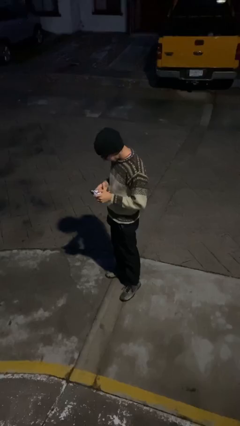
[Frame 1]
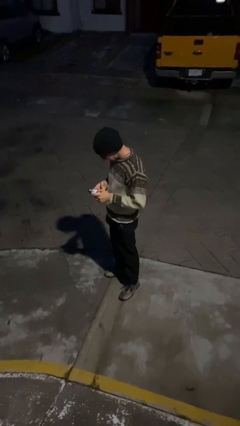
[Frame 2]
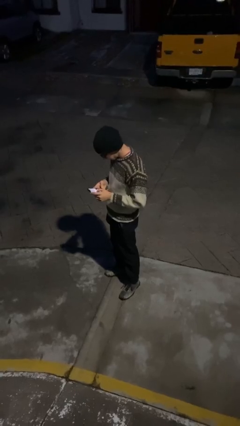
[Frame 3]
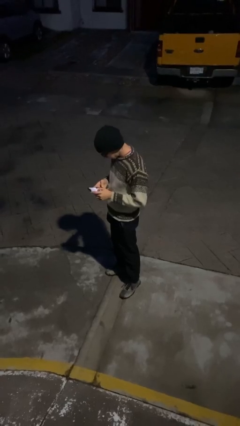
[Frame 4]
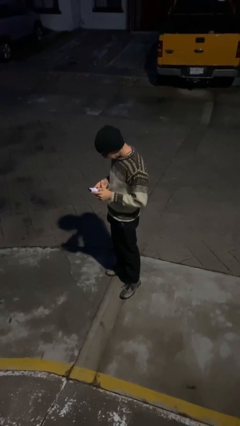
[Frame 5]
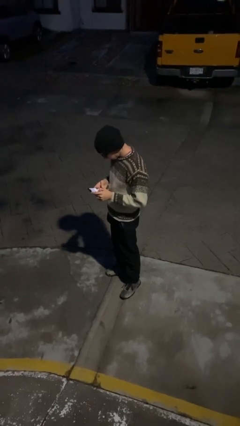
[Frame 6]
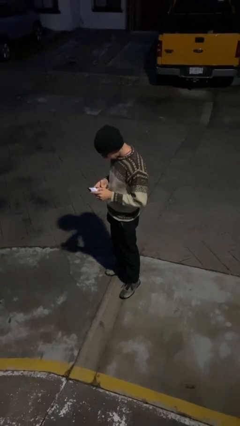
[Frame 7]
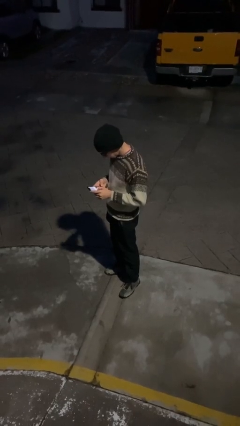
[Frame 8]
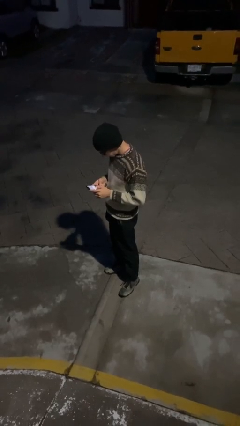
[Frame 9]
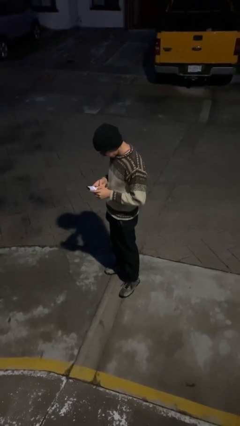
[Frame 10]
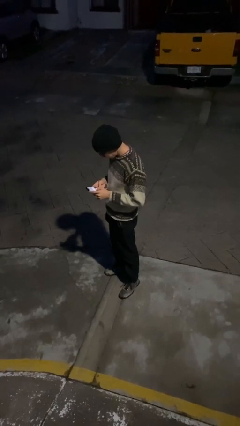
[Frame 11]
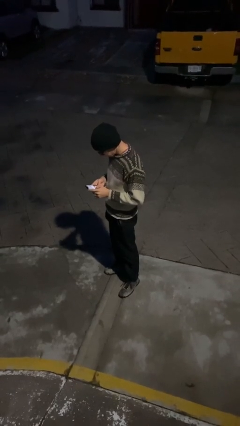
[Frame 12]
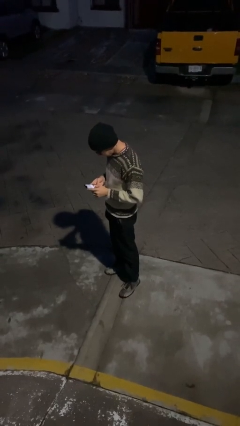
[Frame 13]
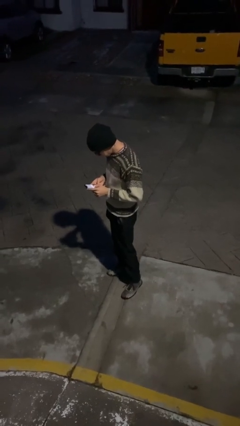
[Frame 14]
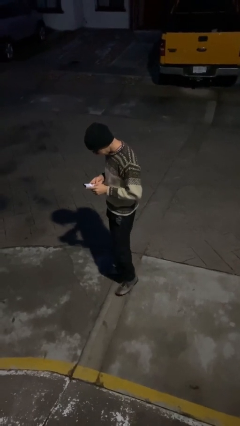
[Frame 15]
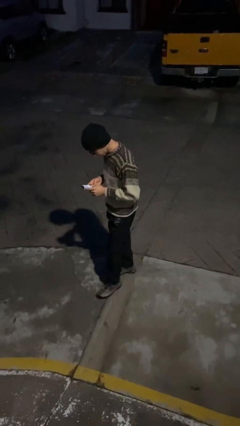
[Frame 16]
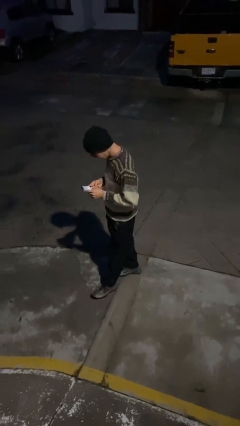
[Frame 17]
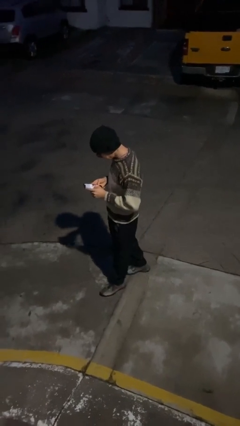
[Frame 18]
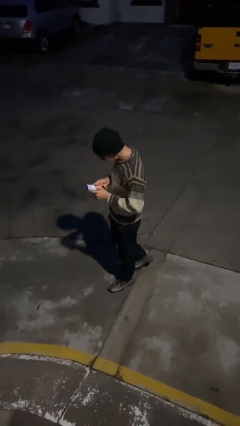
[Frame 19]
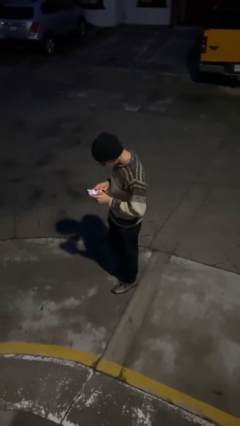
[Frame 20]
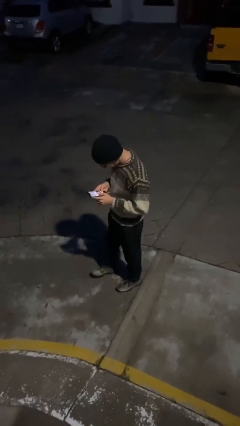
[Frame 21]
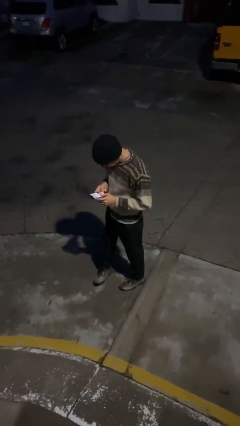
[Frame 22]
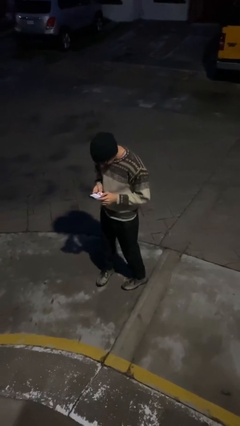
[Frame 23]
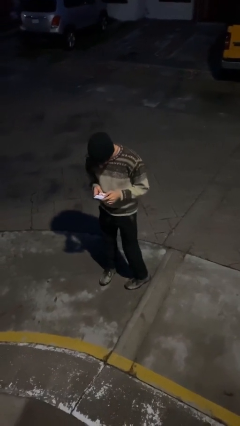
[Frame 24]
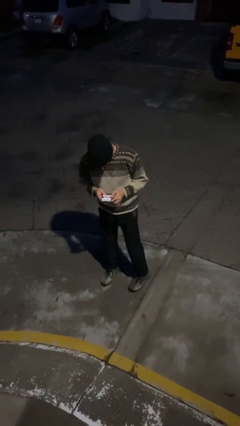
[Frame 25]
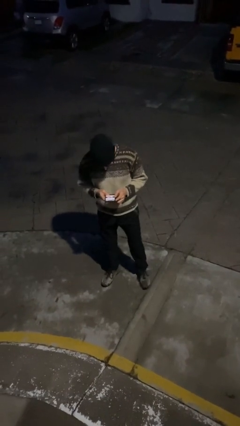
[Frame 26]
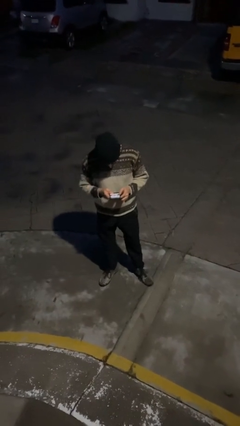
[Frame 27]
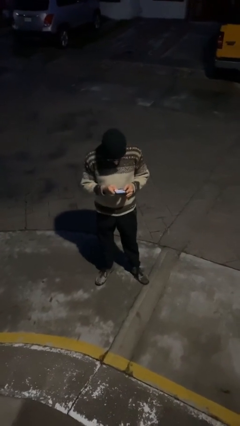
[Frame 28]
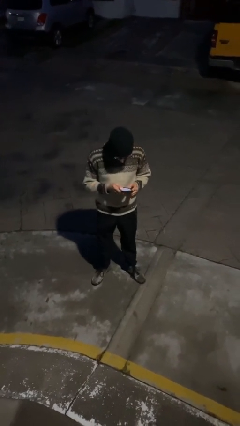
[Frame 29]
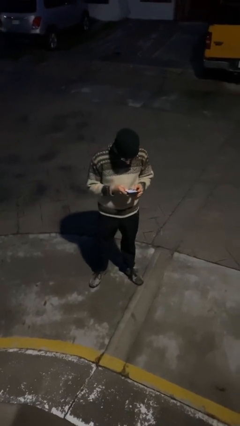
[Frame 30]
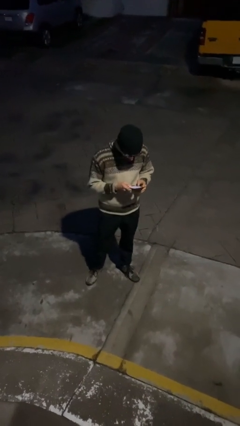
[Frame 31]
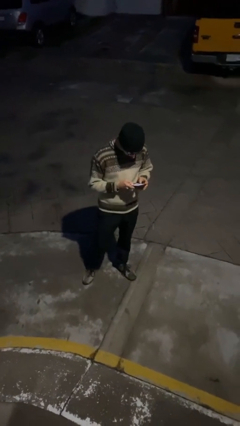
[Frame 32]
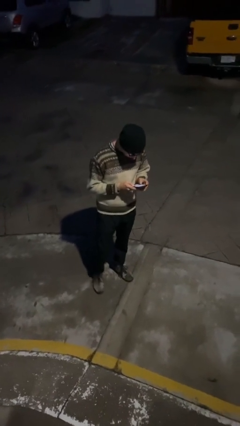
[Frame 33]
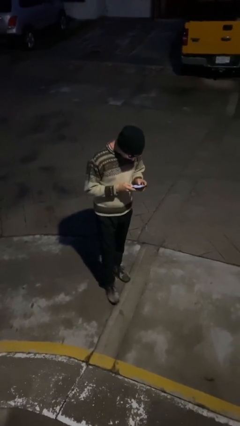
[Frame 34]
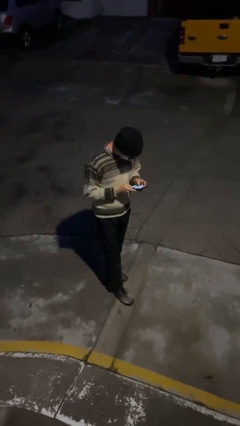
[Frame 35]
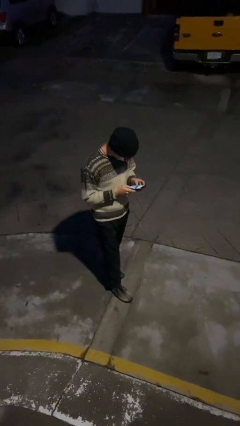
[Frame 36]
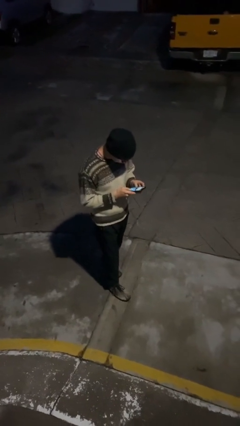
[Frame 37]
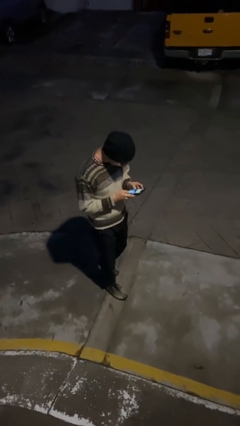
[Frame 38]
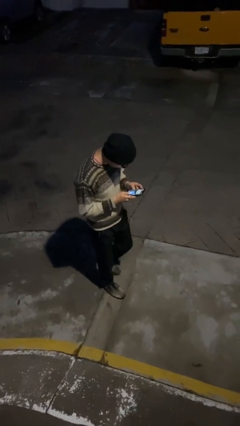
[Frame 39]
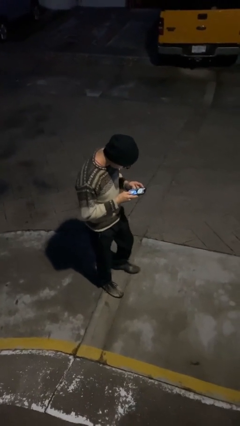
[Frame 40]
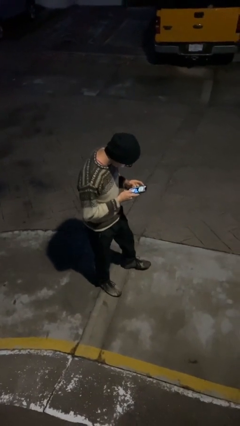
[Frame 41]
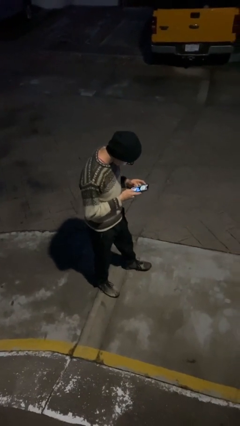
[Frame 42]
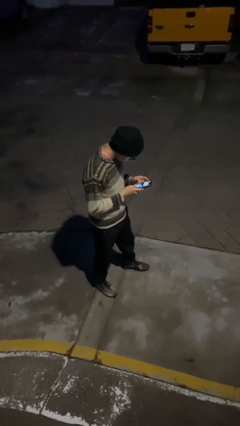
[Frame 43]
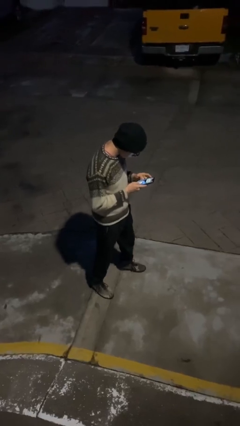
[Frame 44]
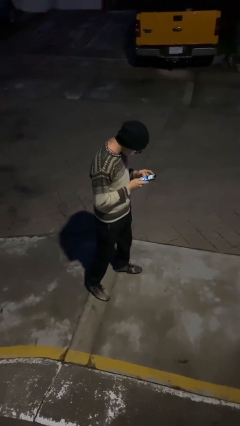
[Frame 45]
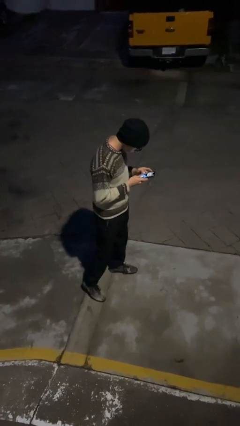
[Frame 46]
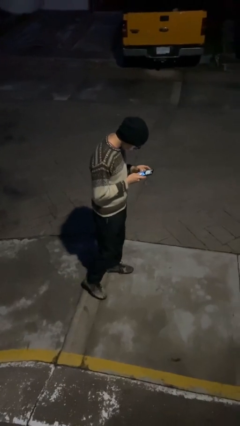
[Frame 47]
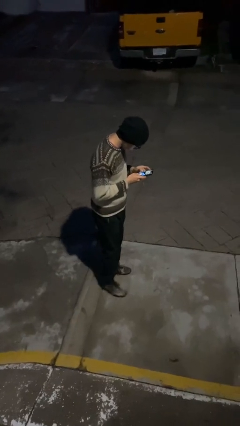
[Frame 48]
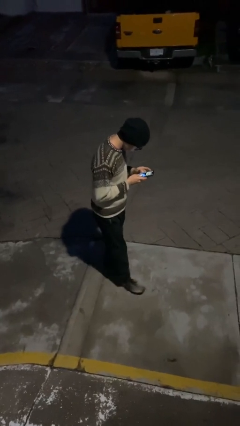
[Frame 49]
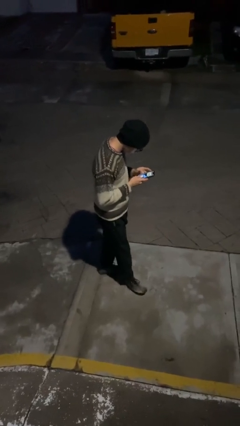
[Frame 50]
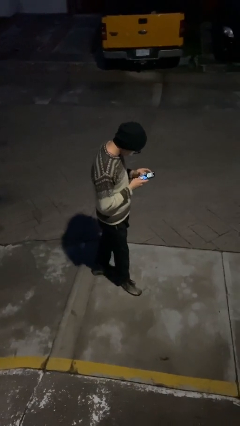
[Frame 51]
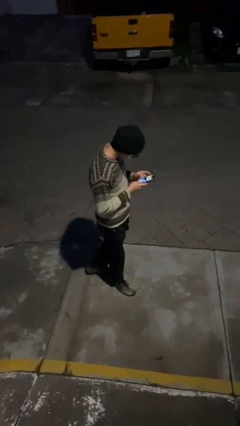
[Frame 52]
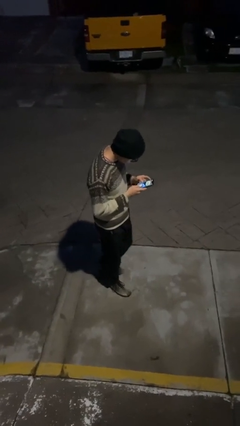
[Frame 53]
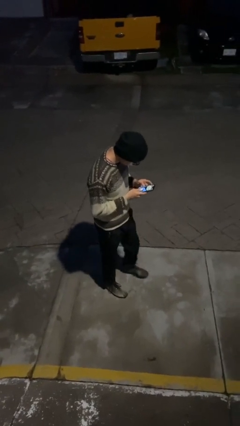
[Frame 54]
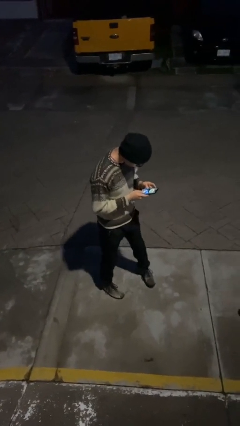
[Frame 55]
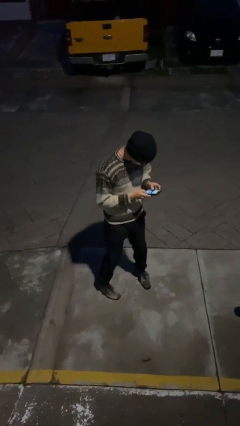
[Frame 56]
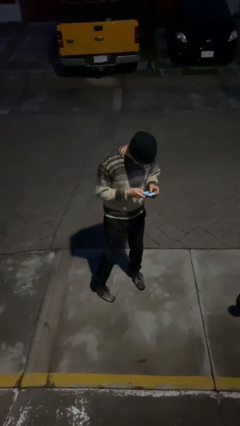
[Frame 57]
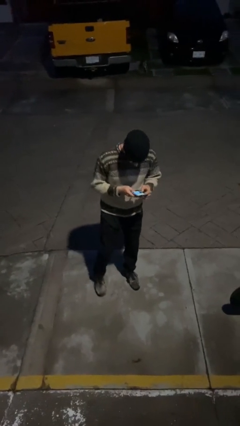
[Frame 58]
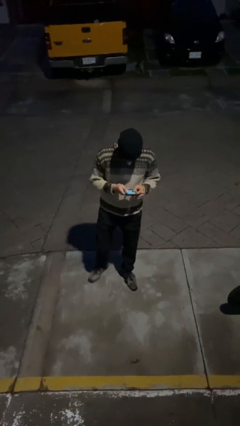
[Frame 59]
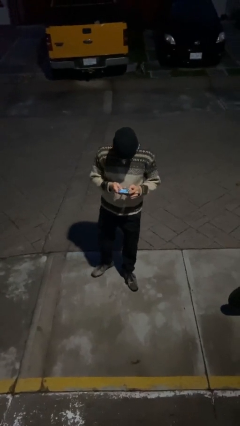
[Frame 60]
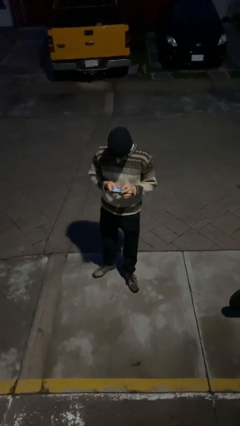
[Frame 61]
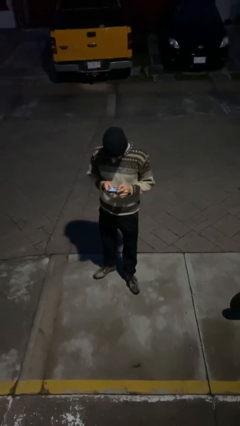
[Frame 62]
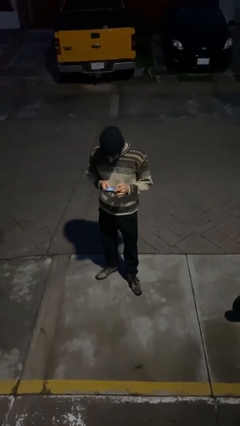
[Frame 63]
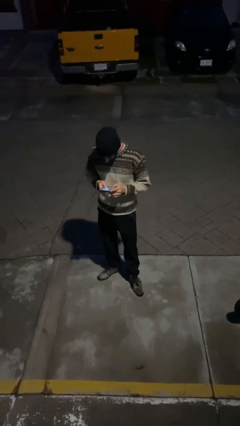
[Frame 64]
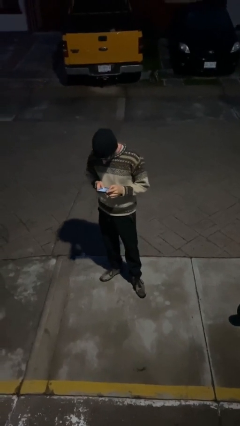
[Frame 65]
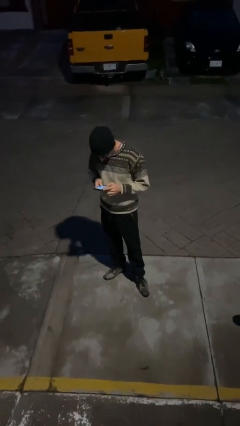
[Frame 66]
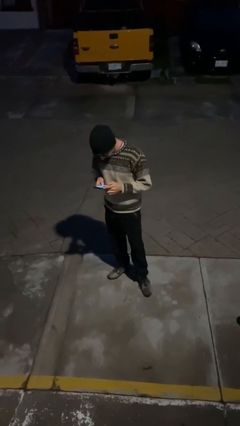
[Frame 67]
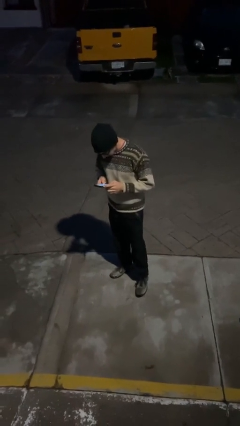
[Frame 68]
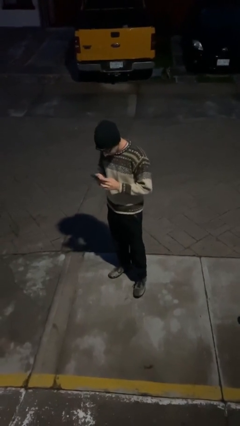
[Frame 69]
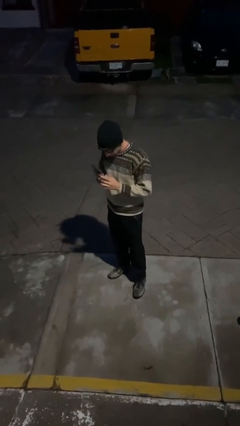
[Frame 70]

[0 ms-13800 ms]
person texts on phone

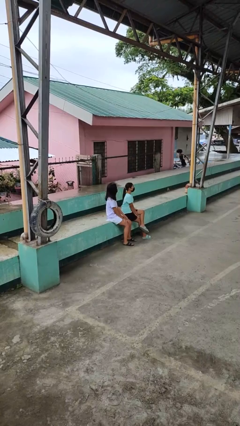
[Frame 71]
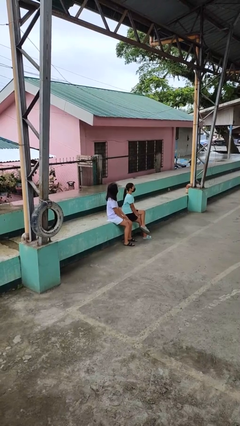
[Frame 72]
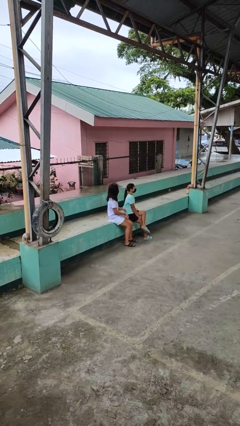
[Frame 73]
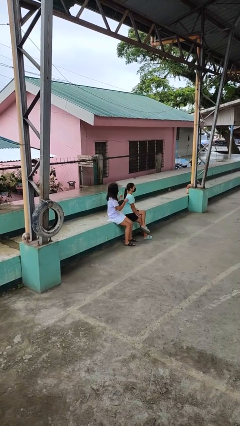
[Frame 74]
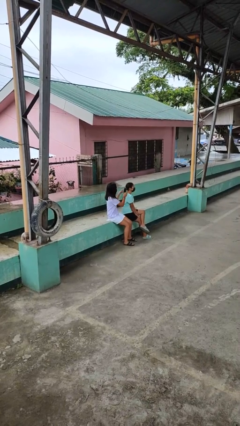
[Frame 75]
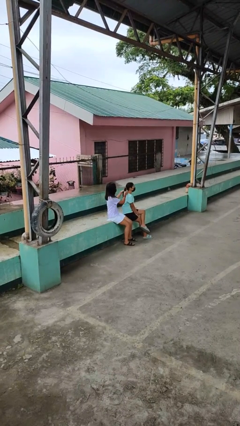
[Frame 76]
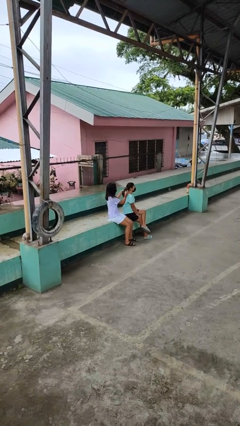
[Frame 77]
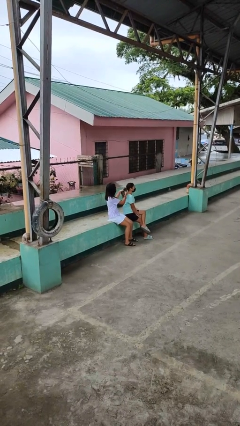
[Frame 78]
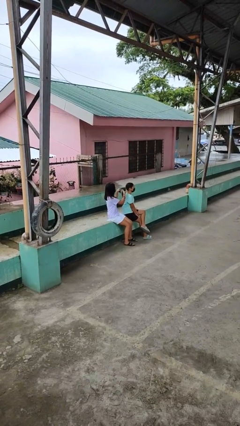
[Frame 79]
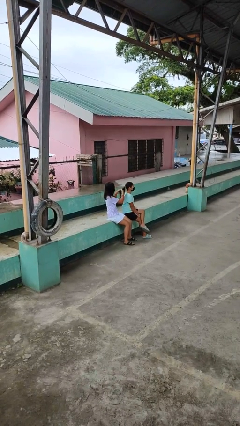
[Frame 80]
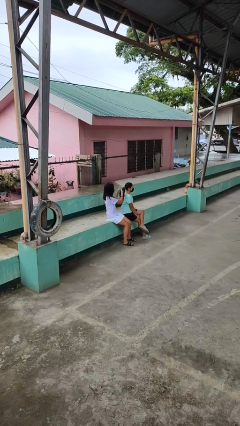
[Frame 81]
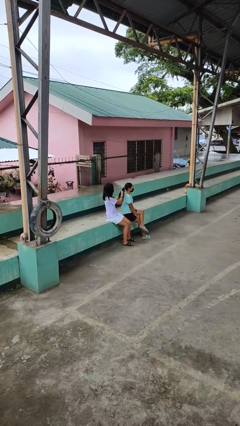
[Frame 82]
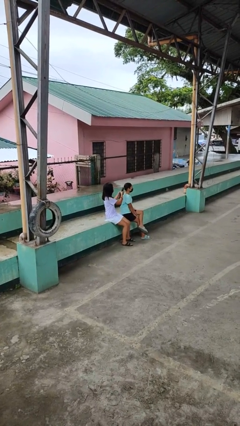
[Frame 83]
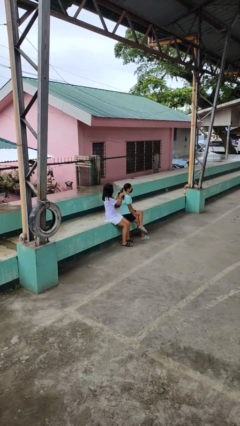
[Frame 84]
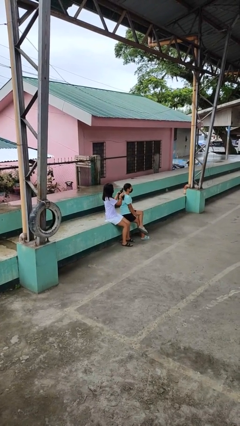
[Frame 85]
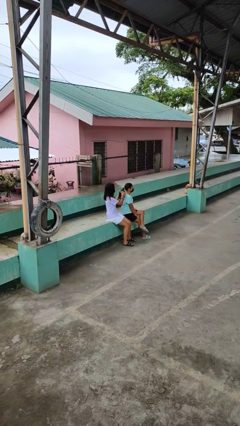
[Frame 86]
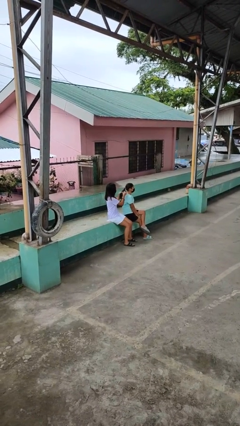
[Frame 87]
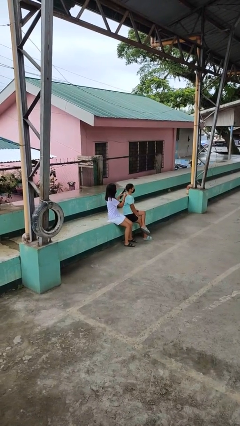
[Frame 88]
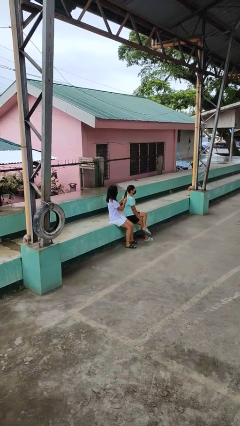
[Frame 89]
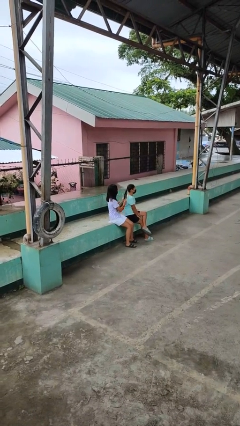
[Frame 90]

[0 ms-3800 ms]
person braids hair of person

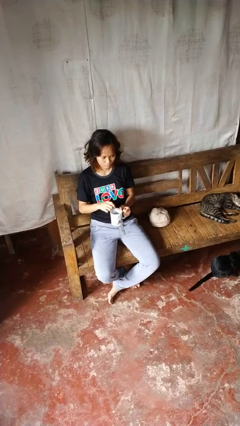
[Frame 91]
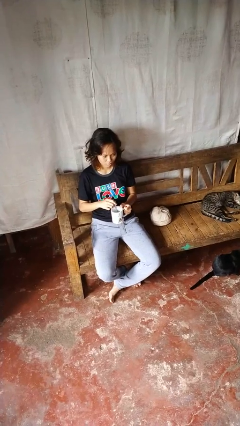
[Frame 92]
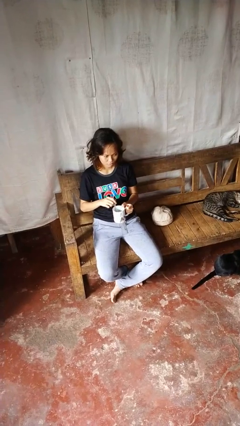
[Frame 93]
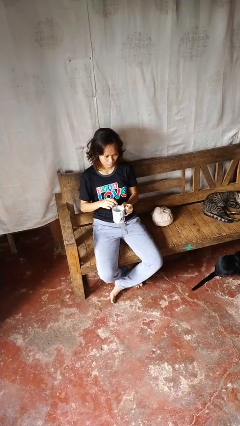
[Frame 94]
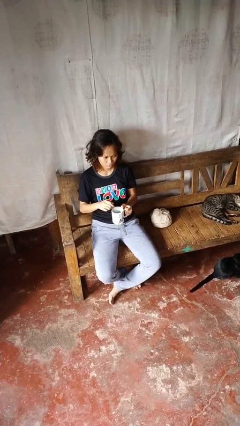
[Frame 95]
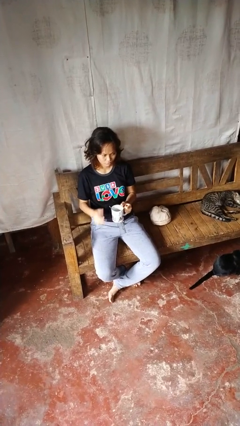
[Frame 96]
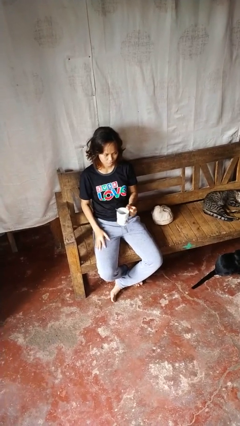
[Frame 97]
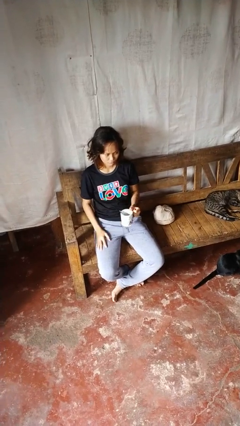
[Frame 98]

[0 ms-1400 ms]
person stirs mug
